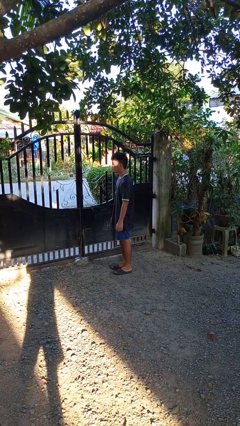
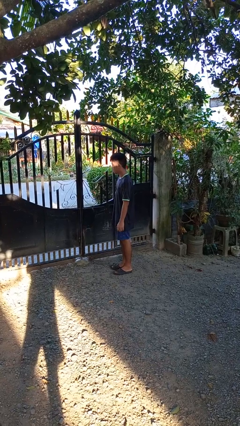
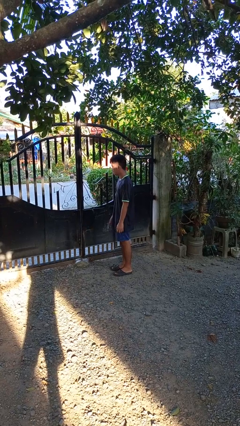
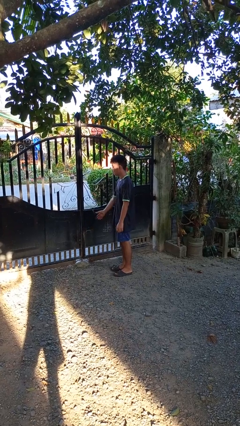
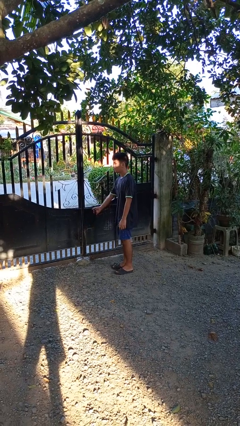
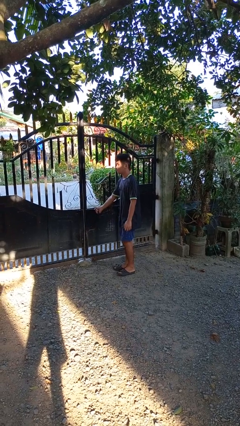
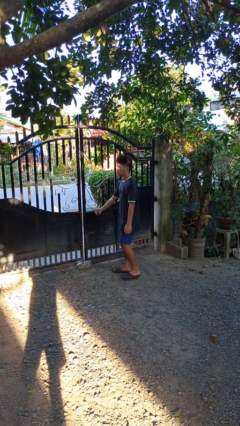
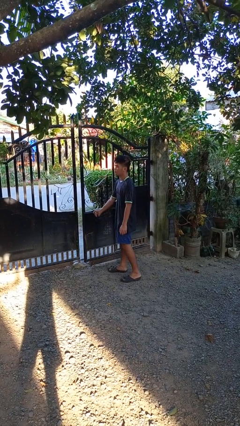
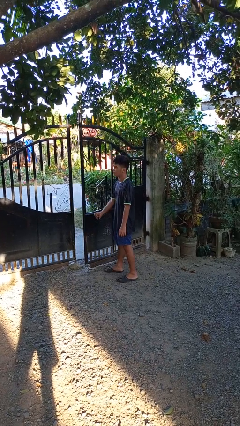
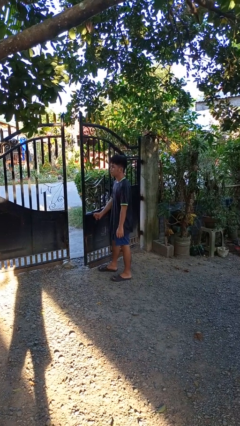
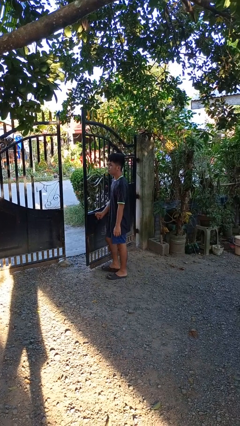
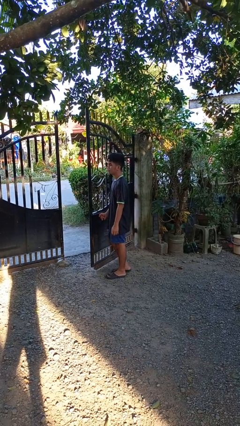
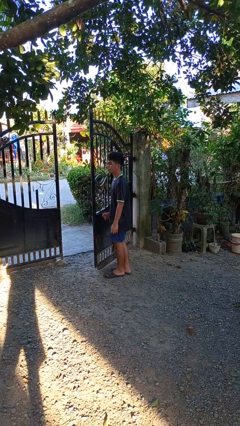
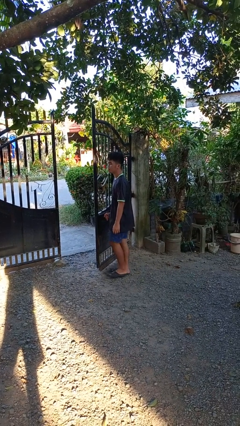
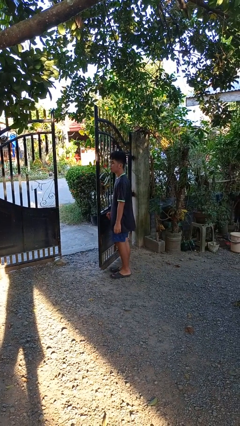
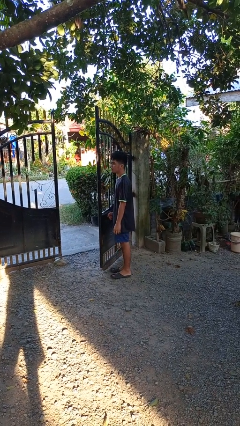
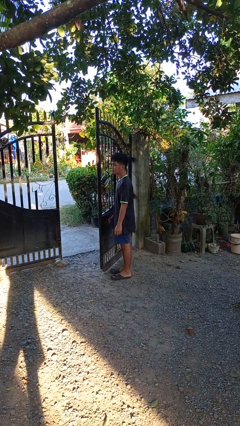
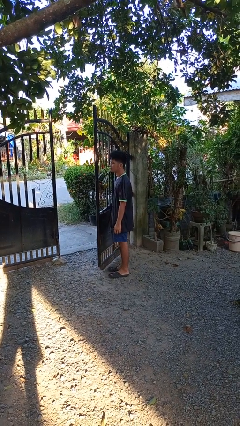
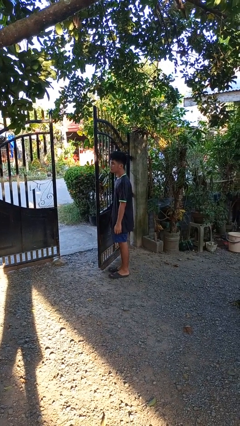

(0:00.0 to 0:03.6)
person opens gate

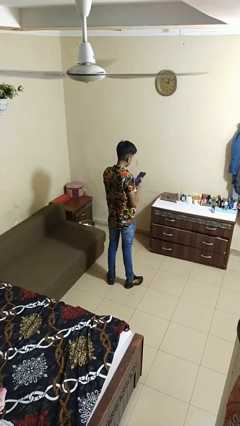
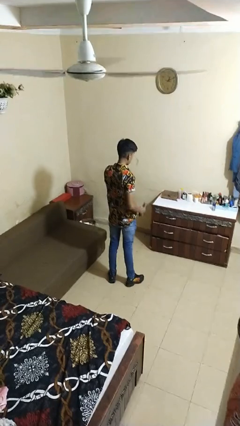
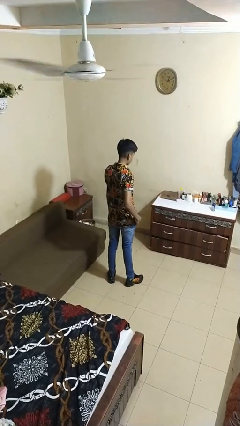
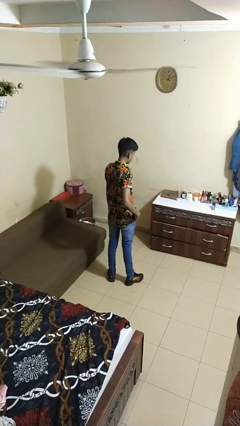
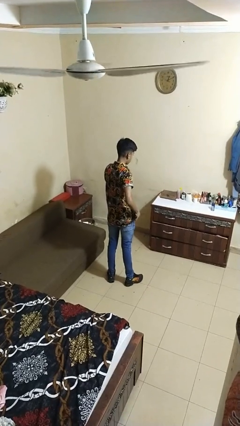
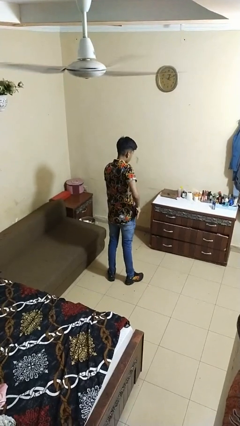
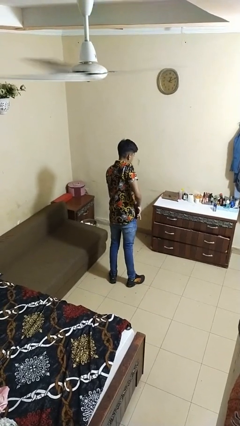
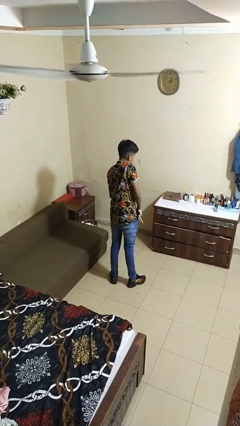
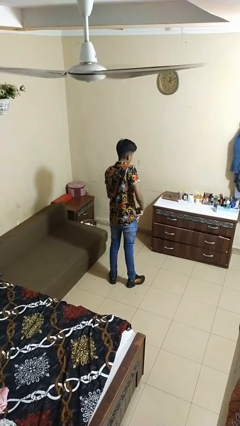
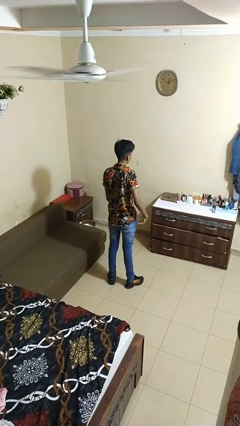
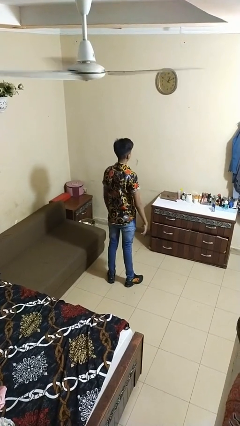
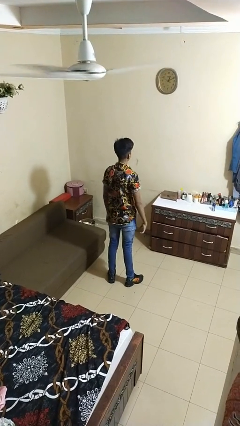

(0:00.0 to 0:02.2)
person puts phone into pocket

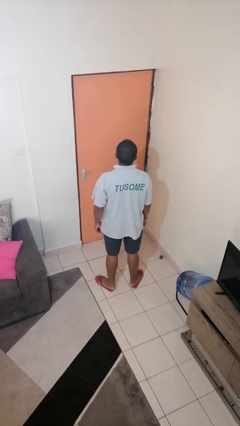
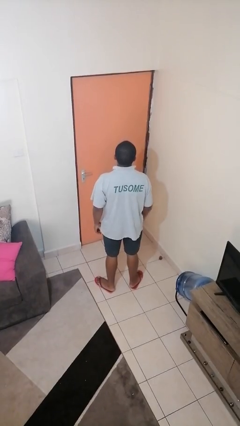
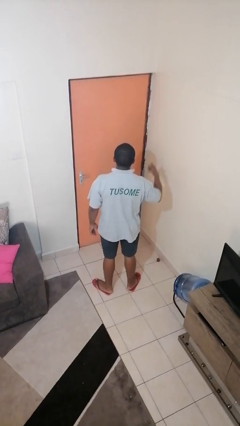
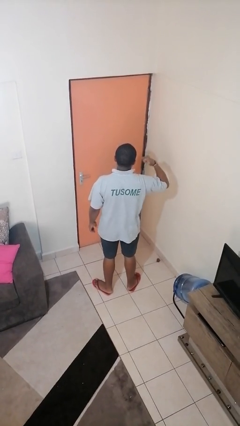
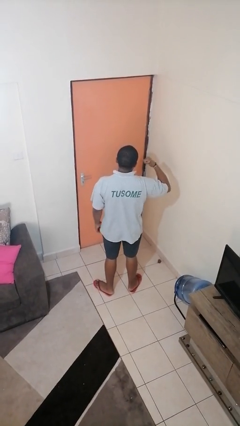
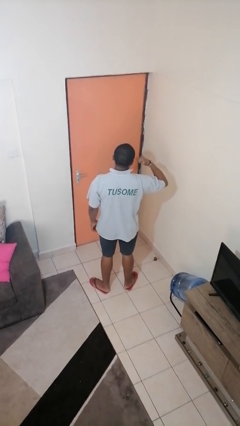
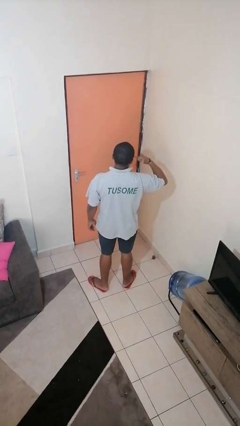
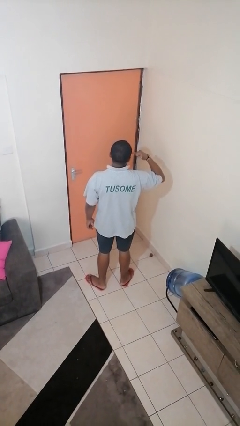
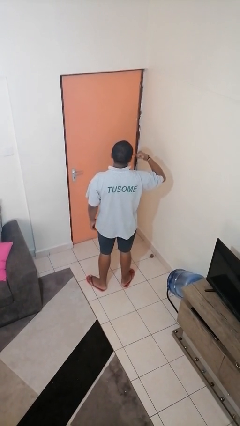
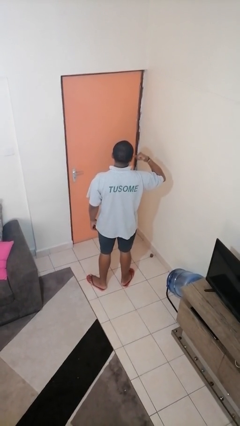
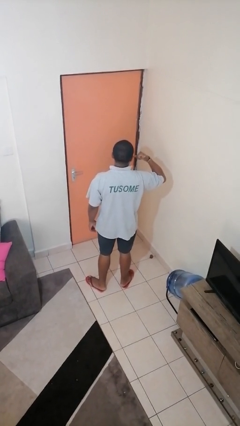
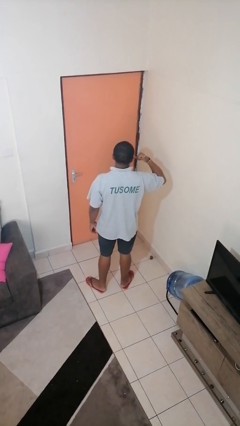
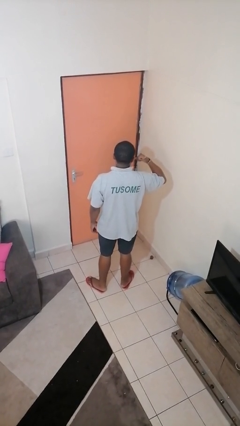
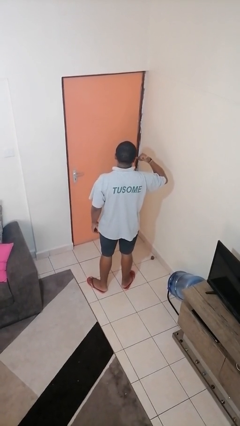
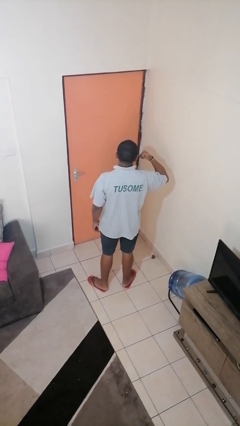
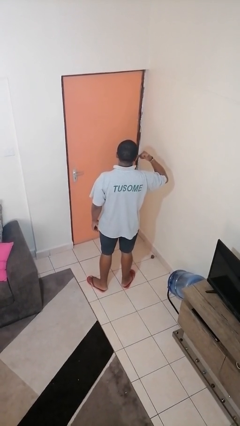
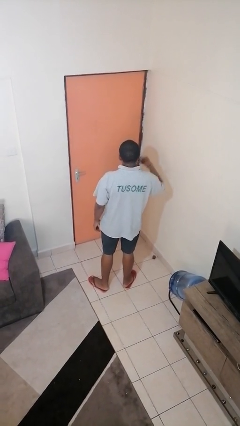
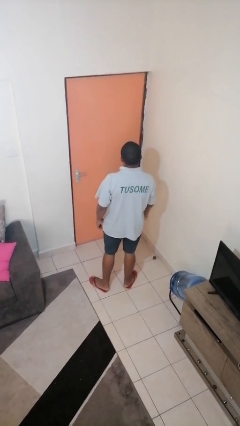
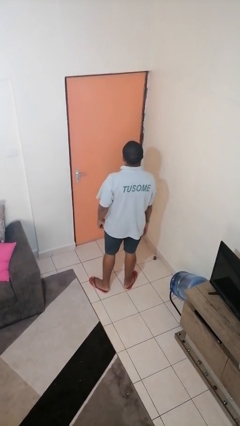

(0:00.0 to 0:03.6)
person gestures call me

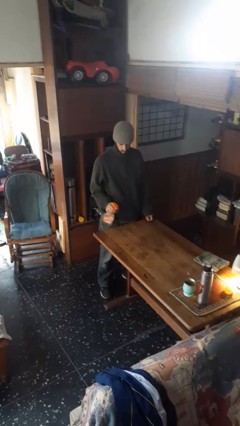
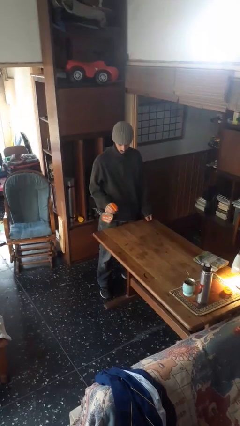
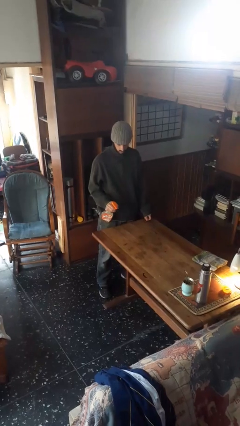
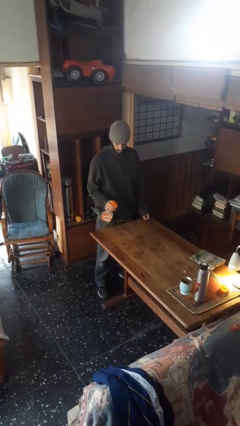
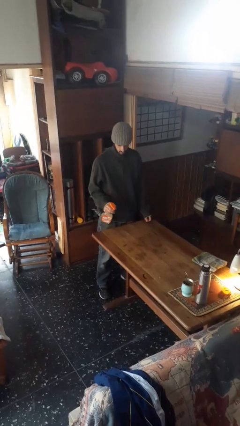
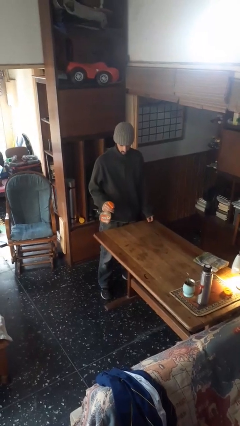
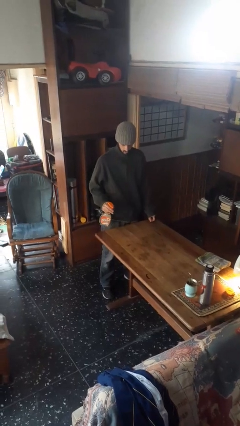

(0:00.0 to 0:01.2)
person sprays from bottle

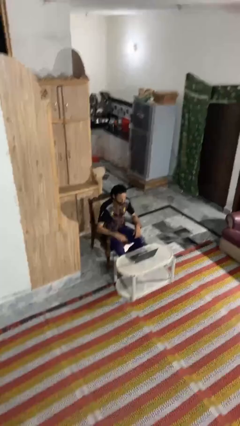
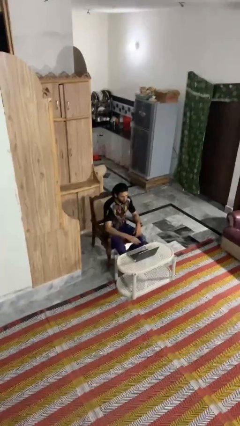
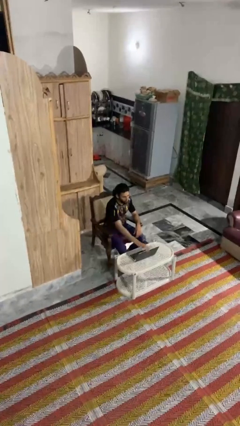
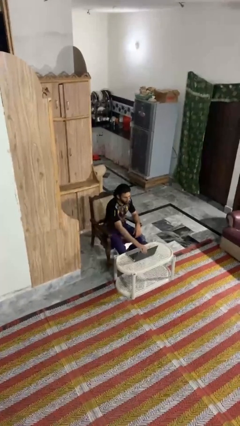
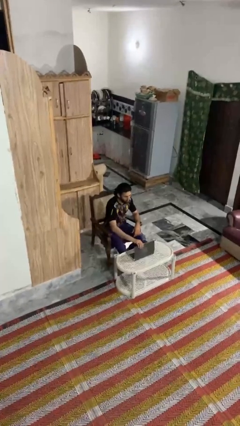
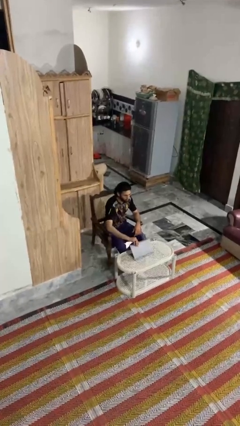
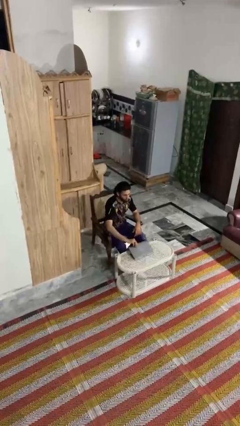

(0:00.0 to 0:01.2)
person closes laptop

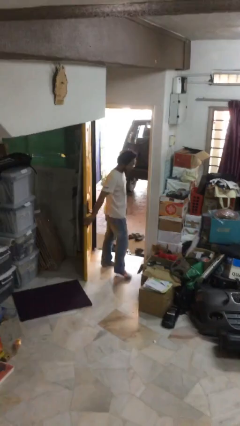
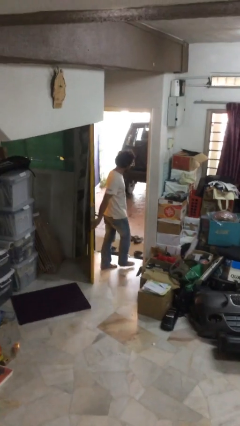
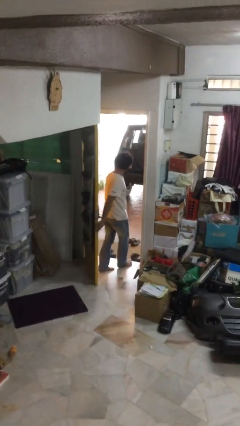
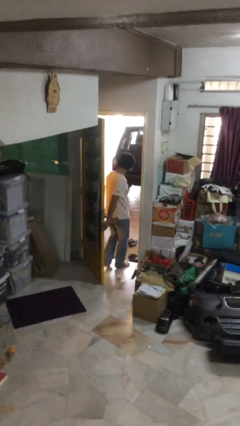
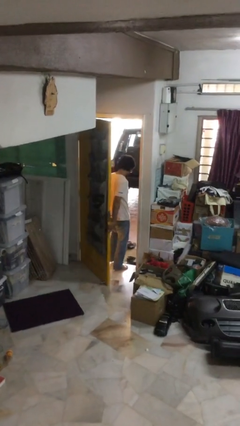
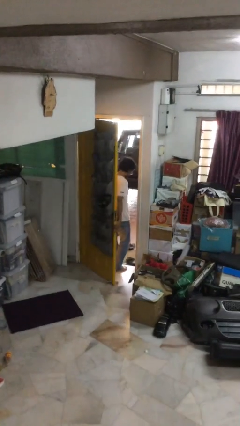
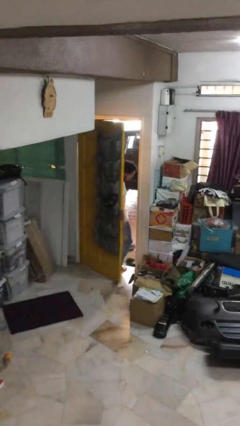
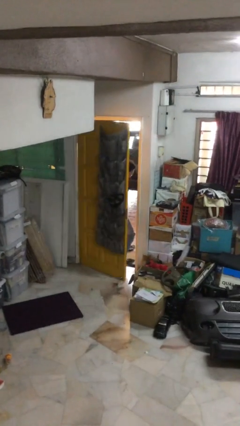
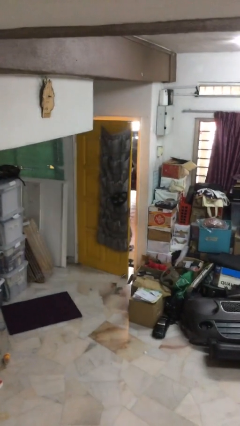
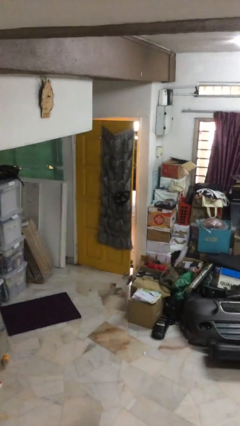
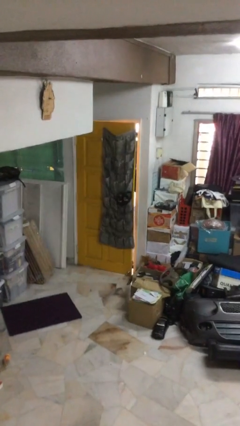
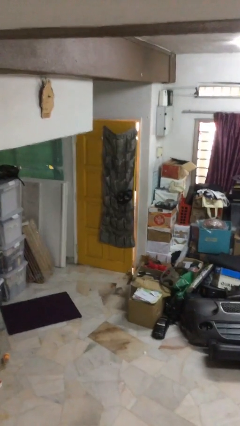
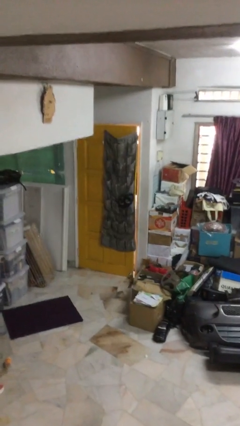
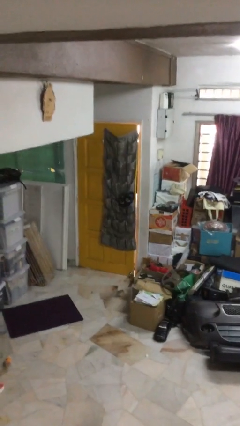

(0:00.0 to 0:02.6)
person closes facility door

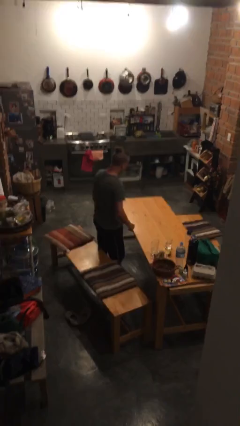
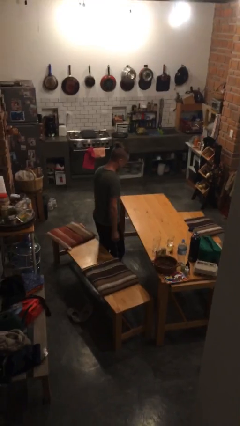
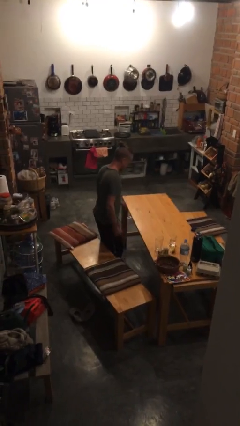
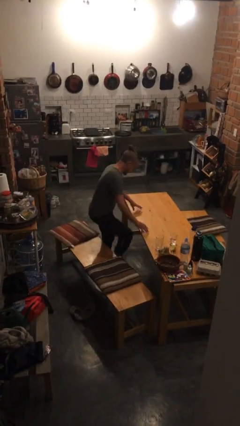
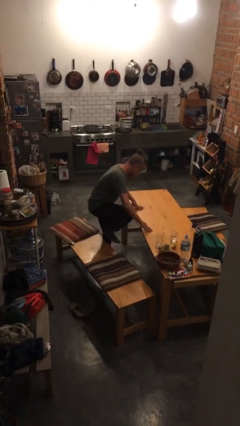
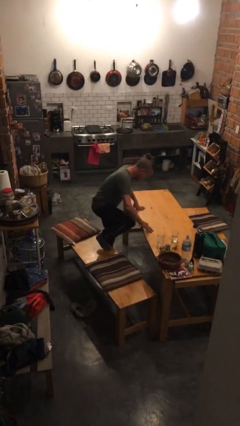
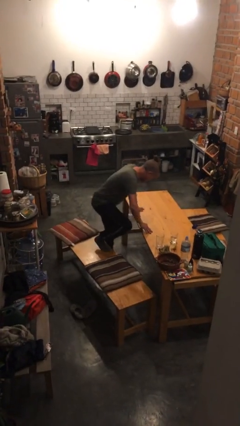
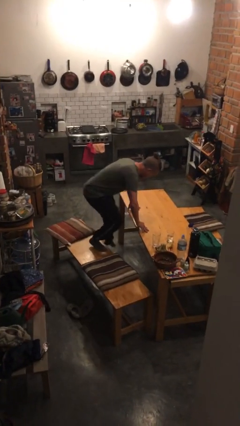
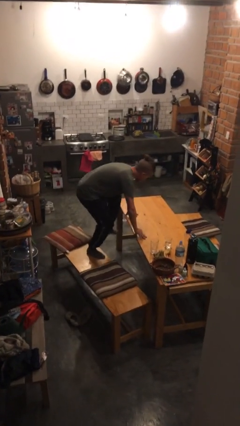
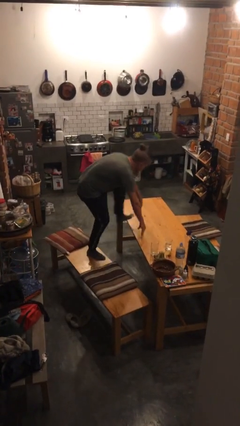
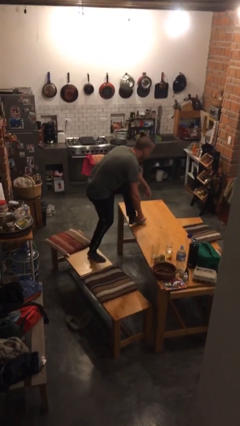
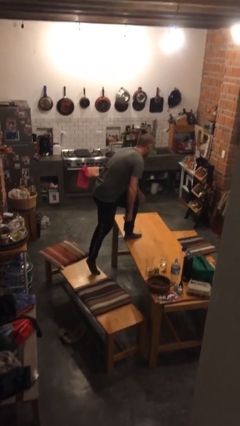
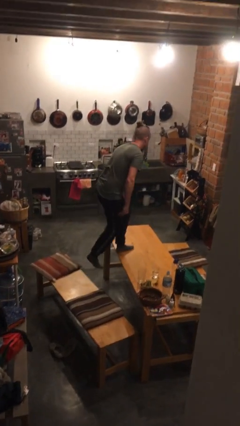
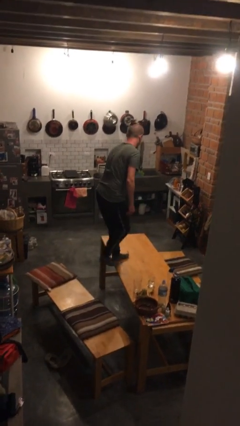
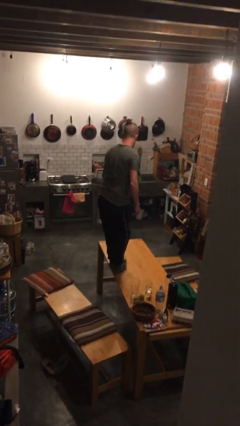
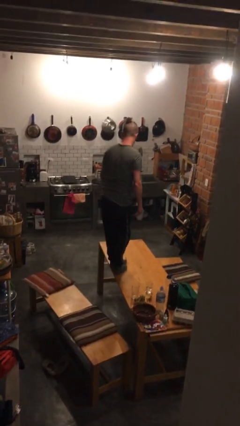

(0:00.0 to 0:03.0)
person climbs on table
